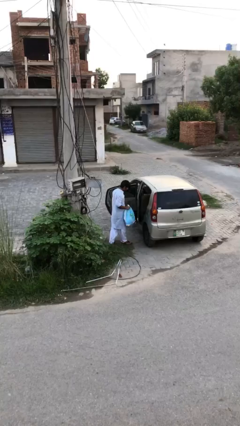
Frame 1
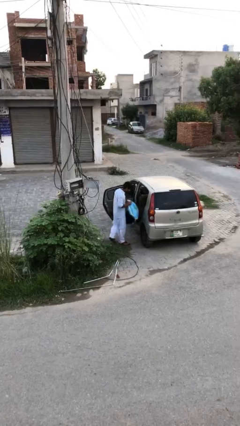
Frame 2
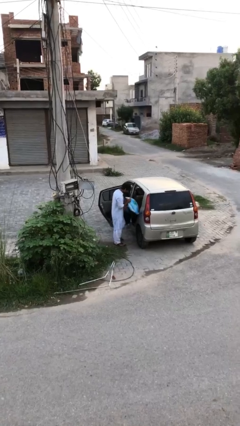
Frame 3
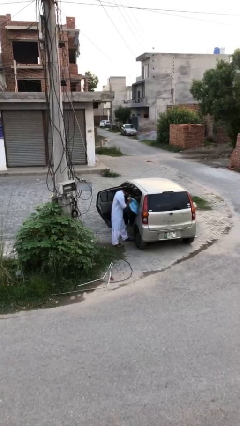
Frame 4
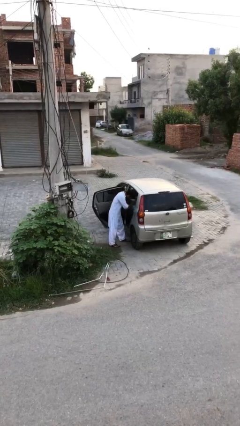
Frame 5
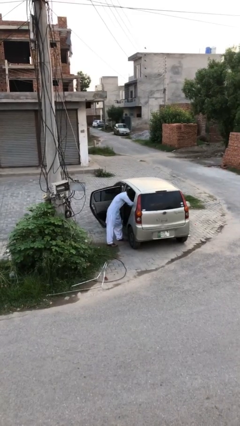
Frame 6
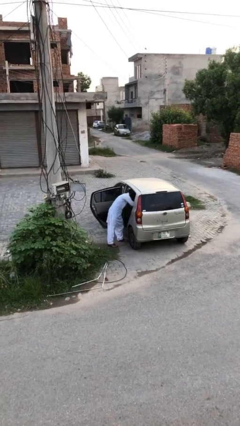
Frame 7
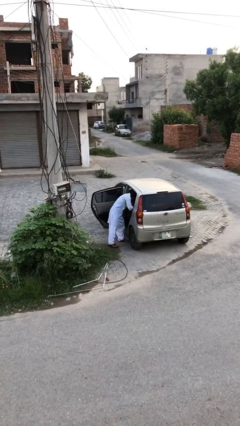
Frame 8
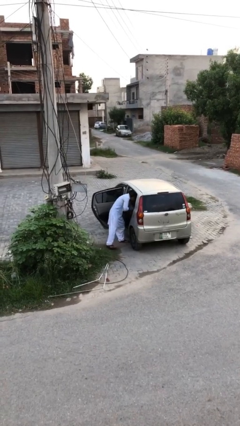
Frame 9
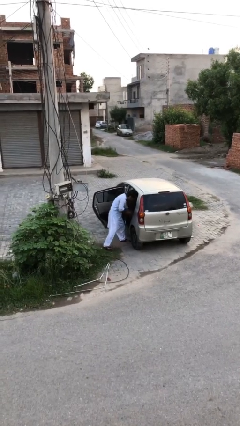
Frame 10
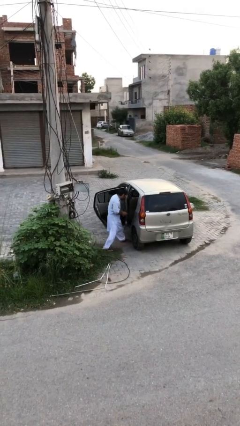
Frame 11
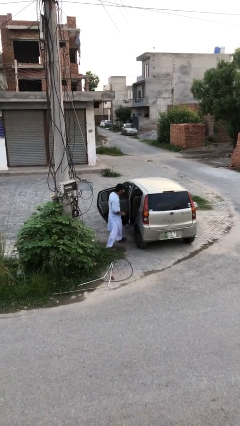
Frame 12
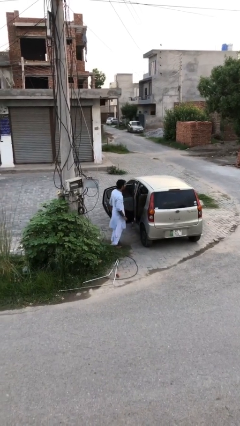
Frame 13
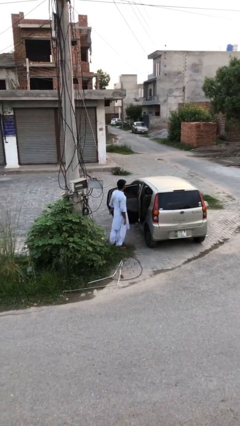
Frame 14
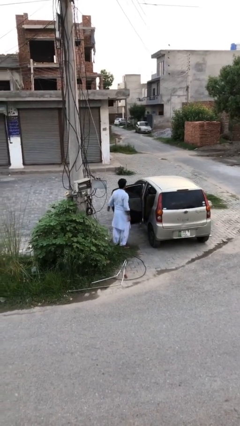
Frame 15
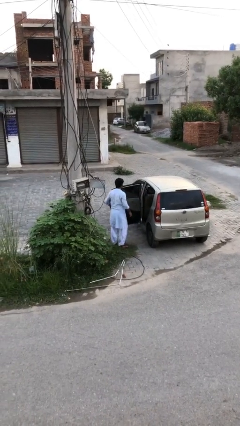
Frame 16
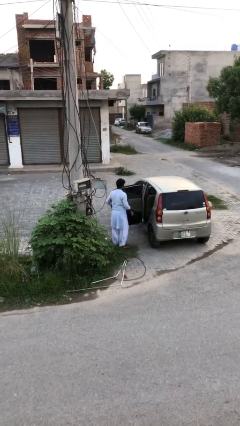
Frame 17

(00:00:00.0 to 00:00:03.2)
person loads car

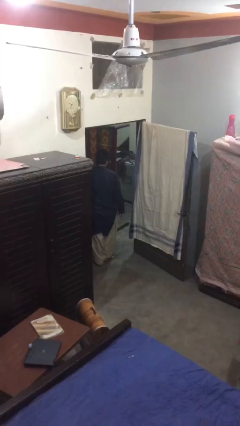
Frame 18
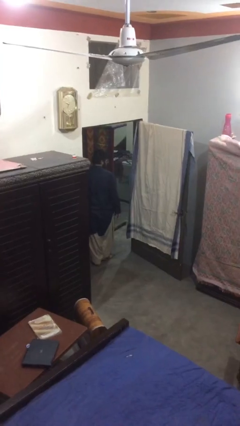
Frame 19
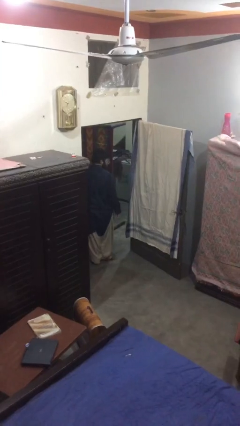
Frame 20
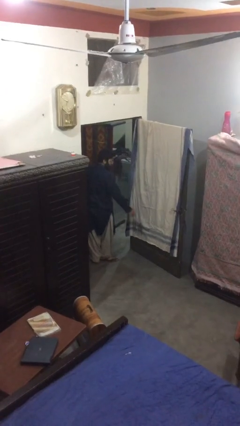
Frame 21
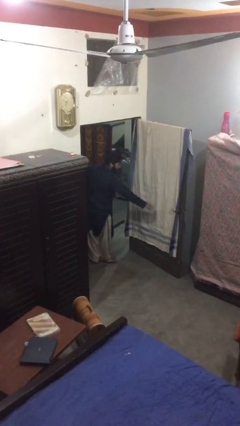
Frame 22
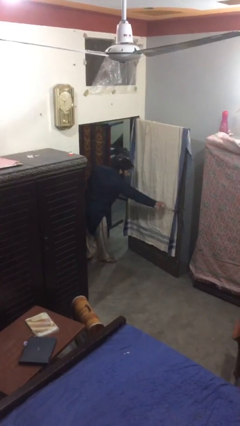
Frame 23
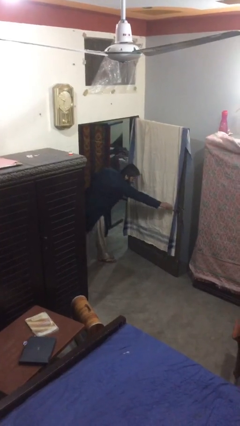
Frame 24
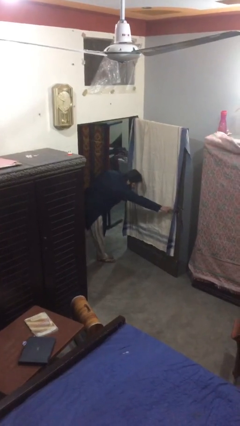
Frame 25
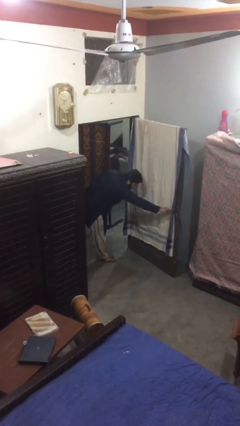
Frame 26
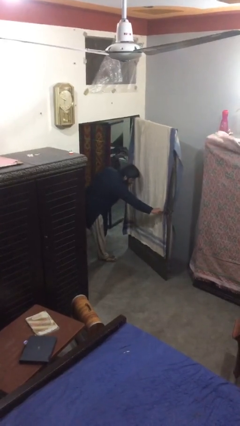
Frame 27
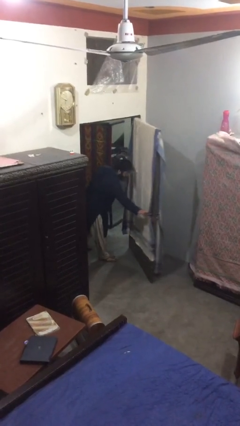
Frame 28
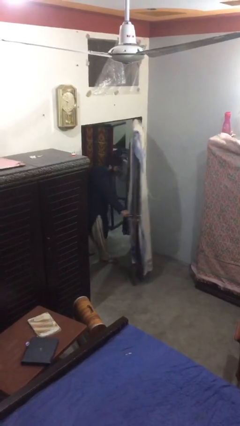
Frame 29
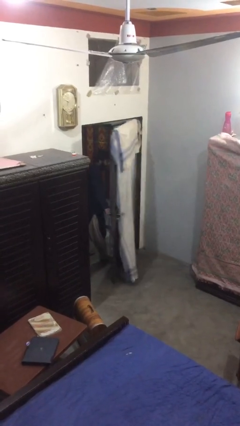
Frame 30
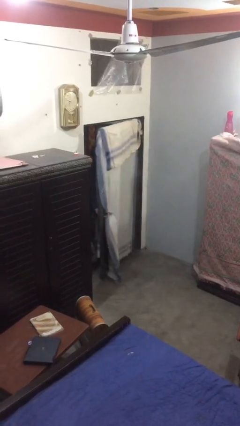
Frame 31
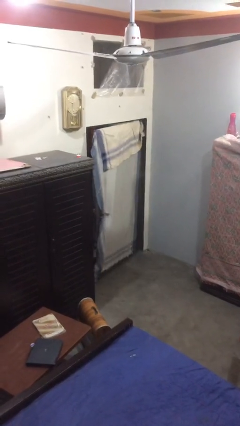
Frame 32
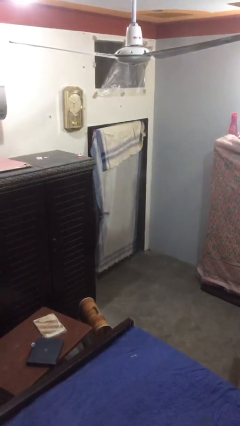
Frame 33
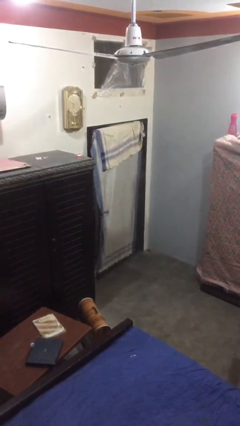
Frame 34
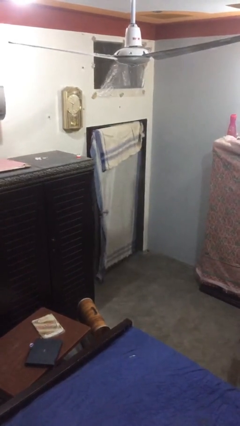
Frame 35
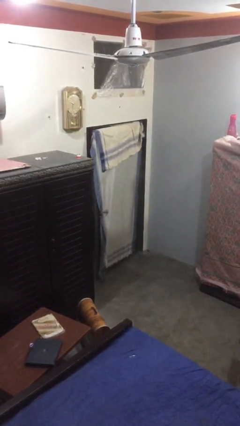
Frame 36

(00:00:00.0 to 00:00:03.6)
person closes facility door

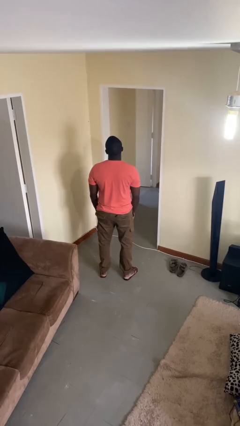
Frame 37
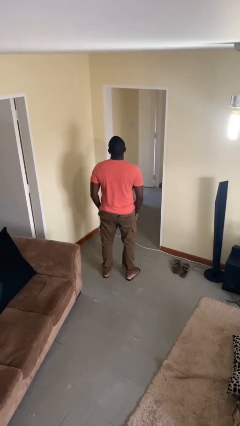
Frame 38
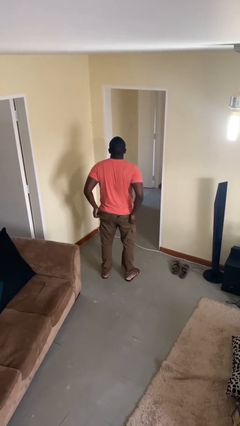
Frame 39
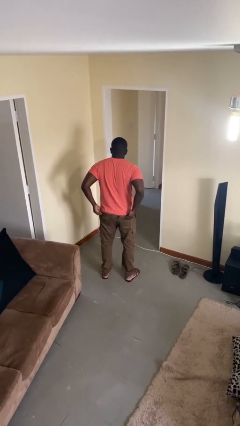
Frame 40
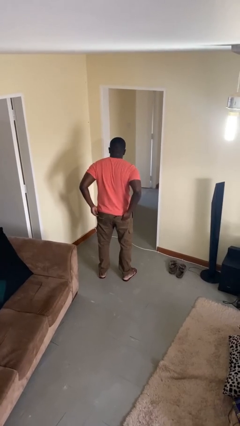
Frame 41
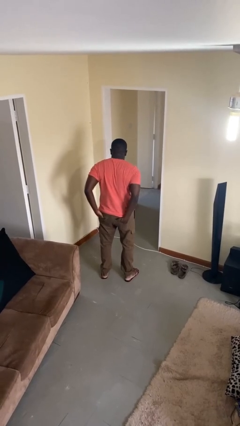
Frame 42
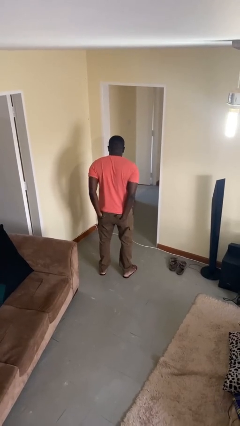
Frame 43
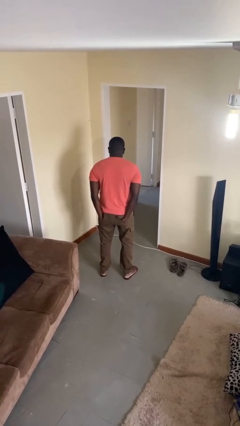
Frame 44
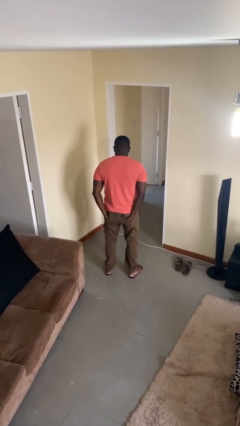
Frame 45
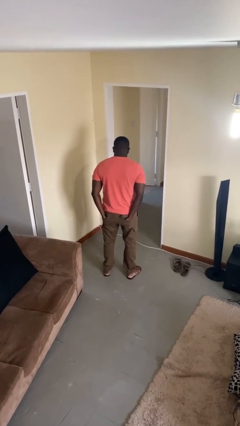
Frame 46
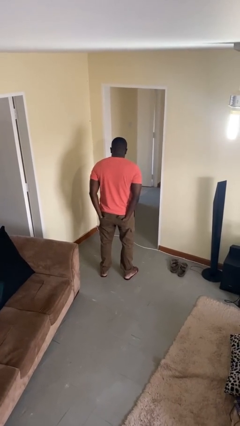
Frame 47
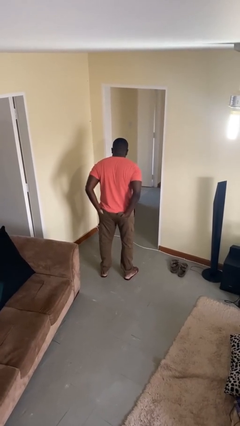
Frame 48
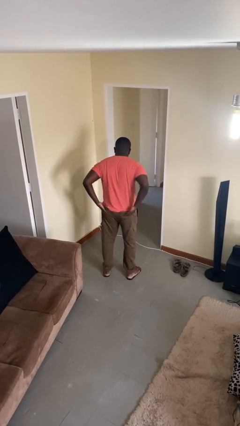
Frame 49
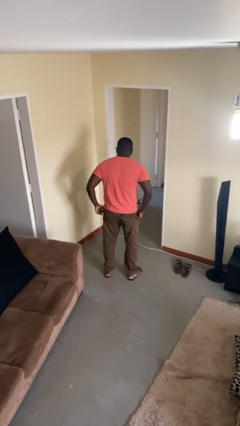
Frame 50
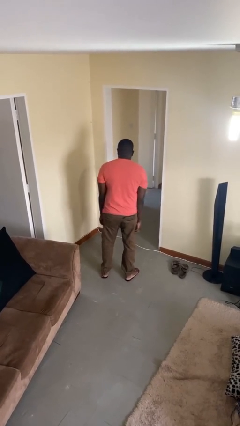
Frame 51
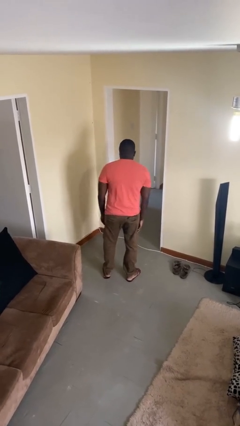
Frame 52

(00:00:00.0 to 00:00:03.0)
person puts hands in back pockets

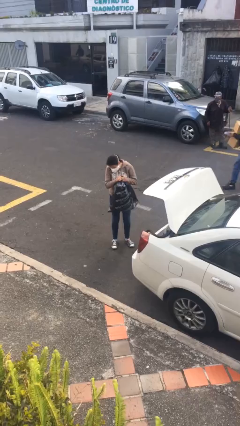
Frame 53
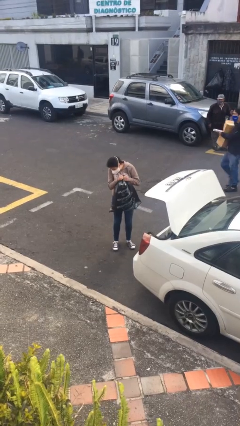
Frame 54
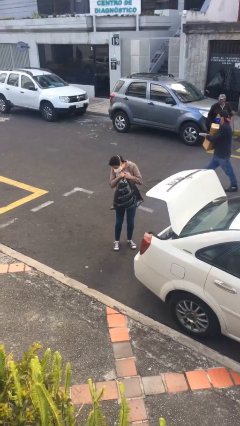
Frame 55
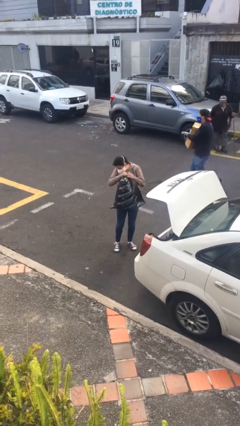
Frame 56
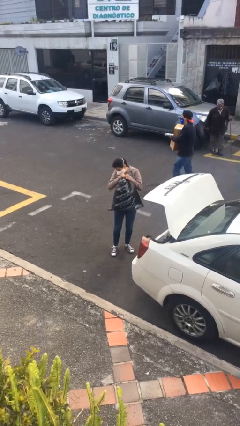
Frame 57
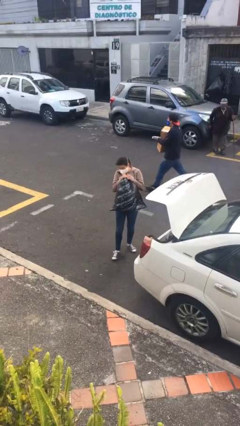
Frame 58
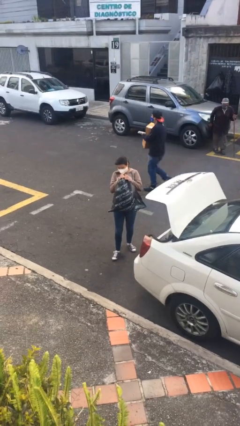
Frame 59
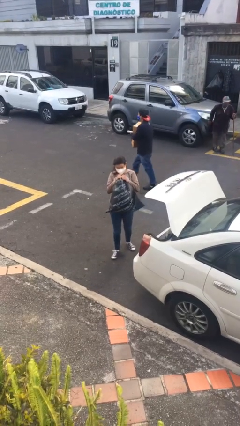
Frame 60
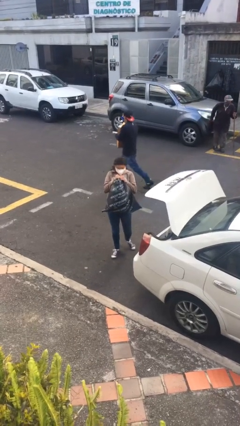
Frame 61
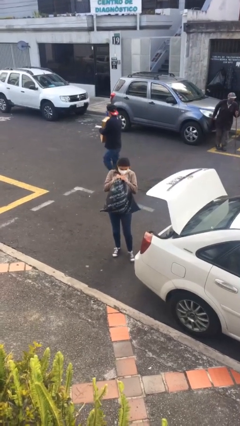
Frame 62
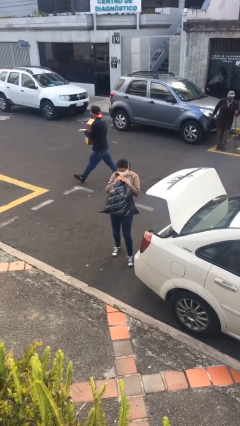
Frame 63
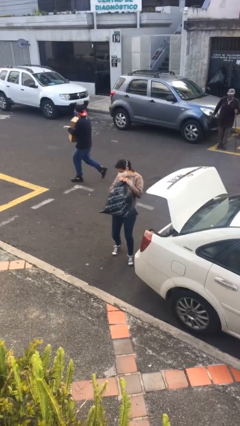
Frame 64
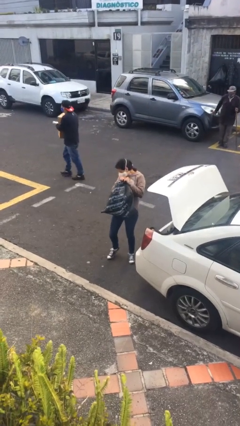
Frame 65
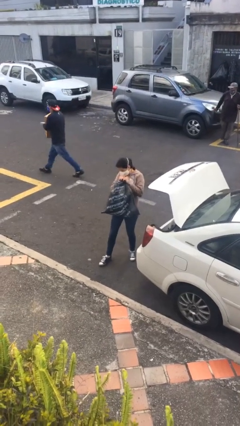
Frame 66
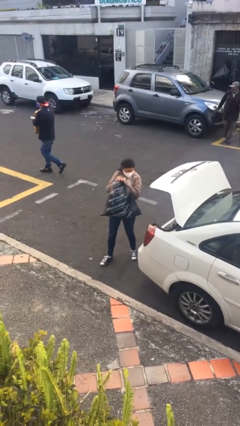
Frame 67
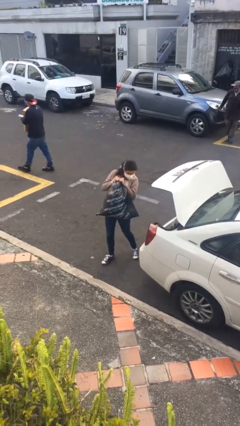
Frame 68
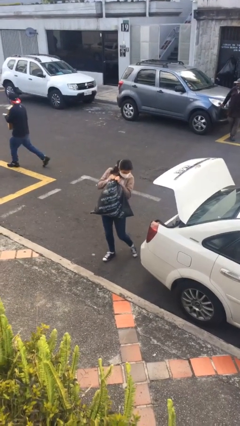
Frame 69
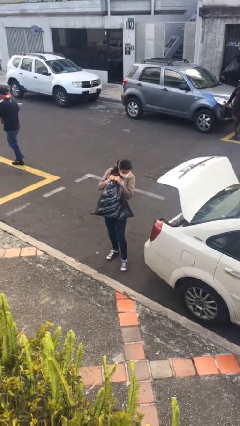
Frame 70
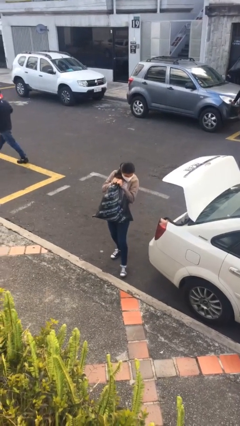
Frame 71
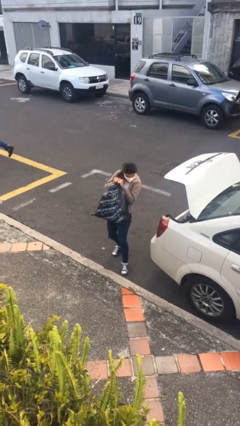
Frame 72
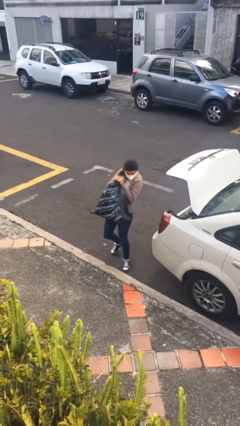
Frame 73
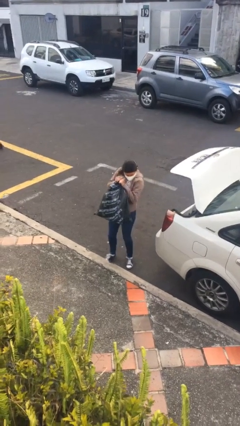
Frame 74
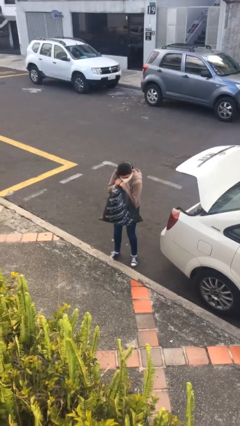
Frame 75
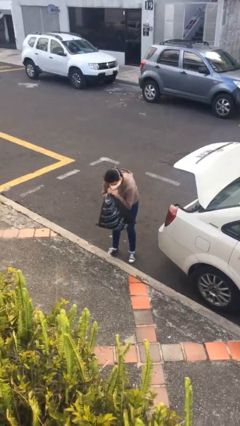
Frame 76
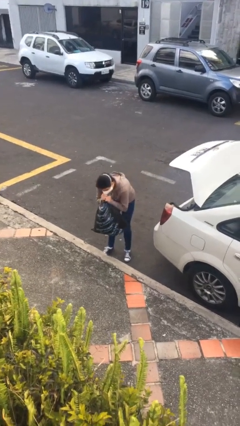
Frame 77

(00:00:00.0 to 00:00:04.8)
person carries heavy object

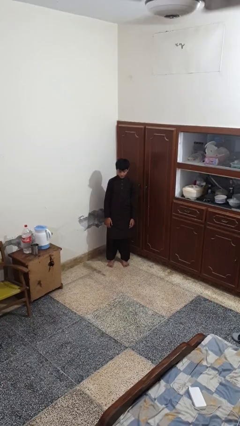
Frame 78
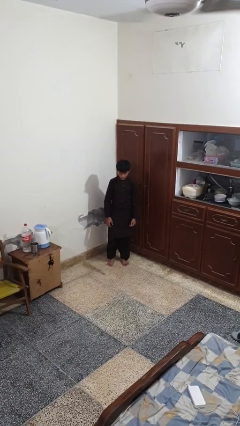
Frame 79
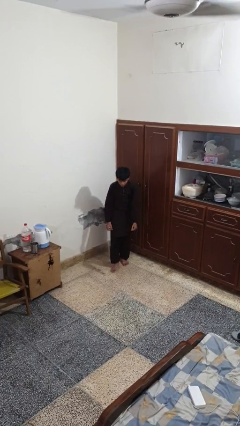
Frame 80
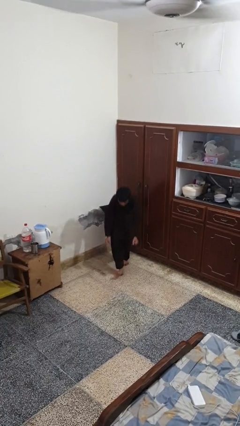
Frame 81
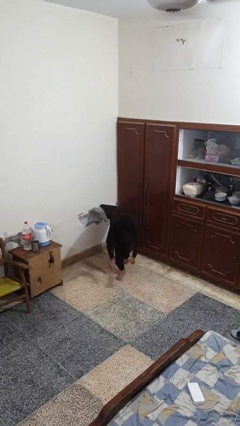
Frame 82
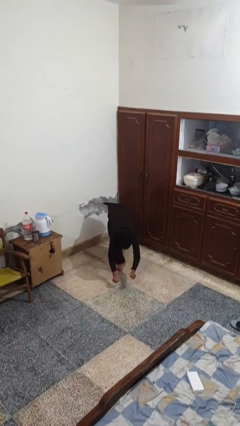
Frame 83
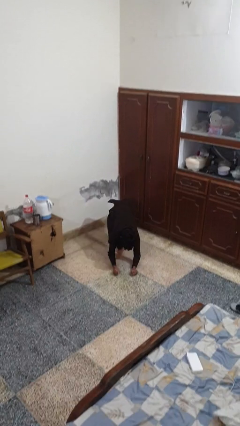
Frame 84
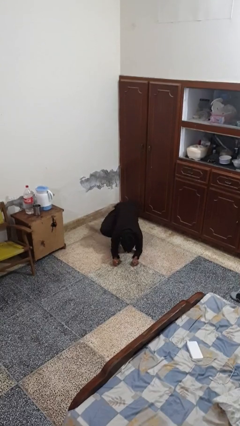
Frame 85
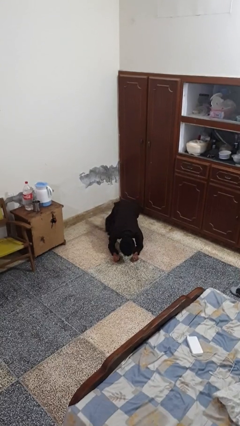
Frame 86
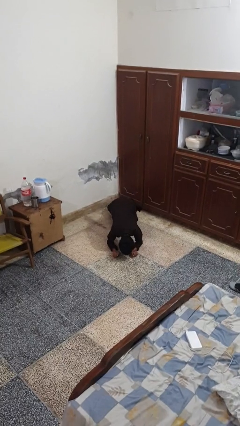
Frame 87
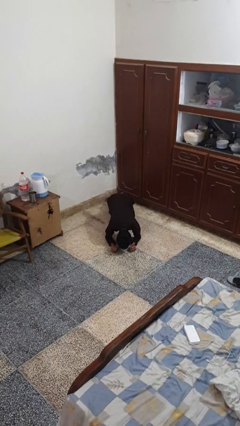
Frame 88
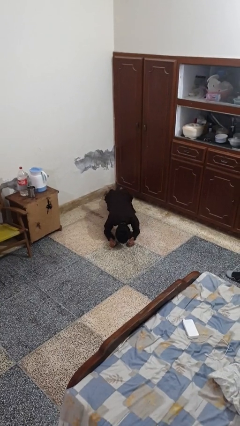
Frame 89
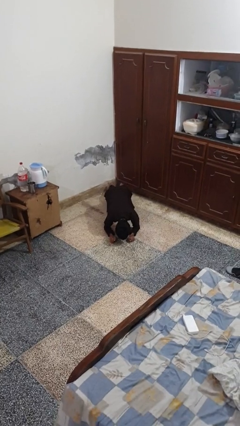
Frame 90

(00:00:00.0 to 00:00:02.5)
person exercises with plank

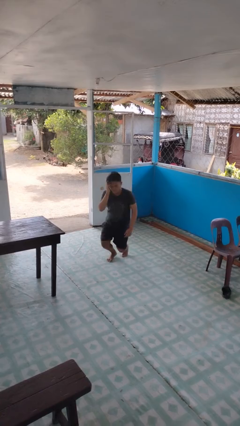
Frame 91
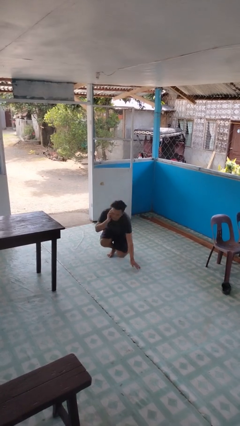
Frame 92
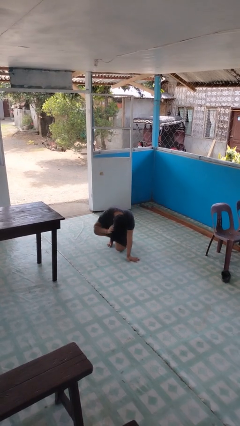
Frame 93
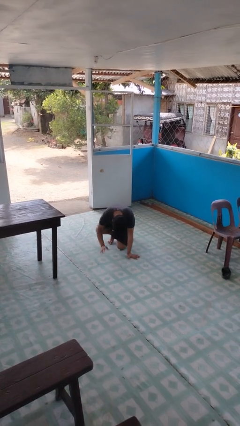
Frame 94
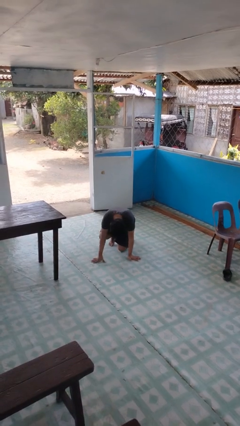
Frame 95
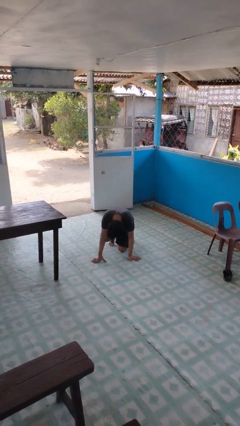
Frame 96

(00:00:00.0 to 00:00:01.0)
person falls while standing
